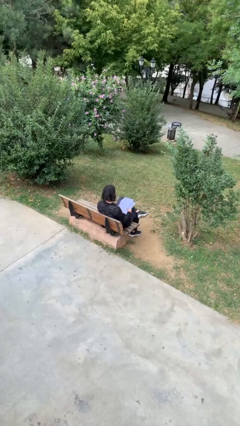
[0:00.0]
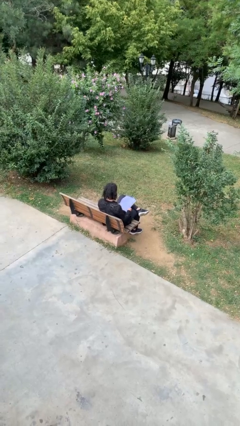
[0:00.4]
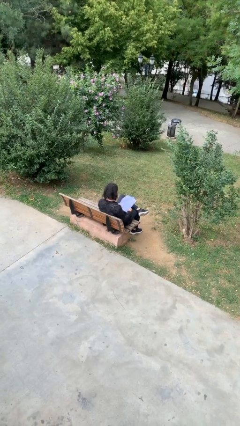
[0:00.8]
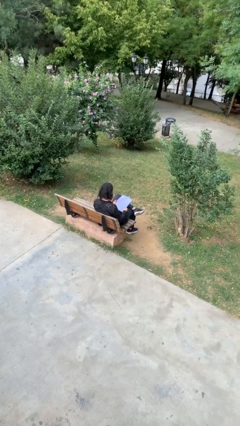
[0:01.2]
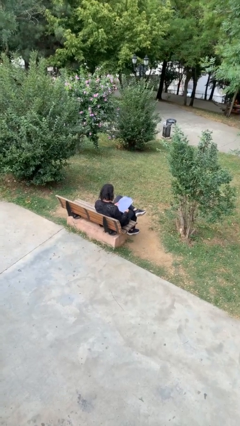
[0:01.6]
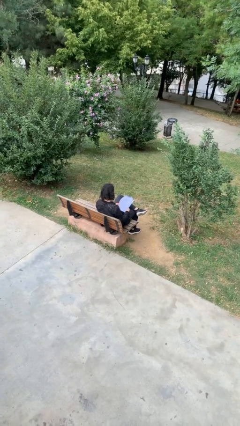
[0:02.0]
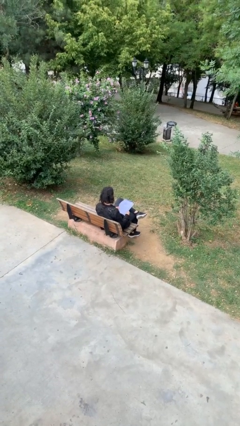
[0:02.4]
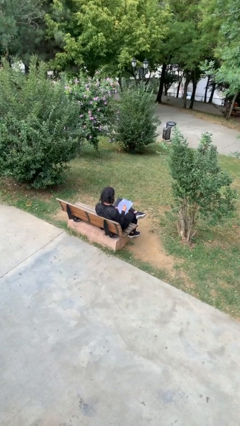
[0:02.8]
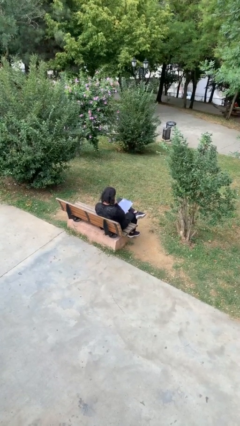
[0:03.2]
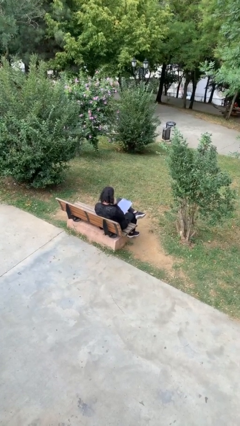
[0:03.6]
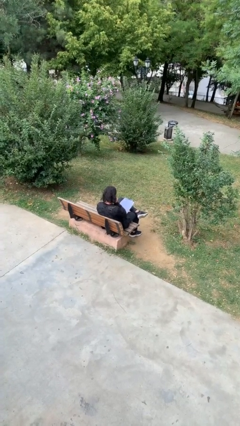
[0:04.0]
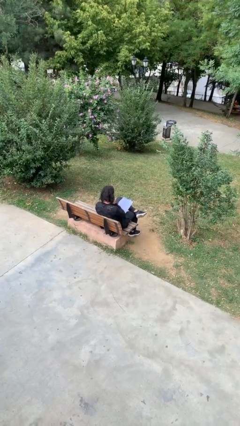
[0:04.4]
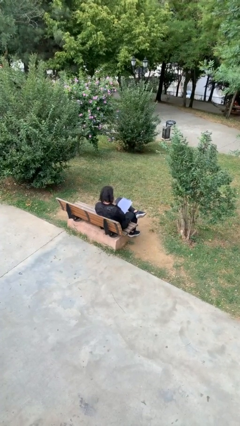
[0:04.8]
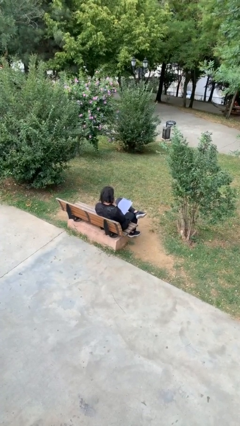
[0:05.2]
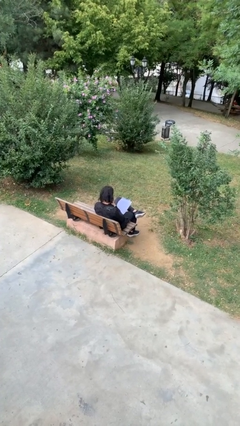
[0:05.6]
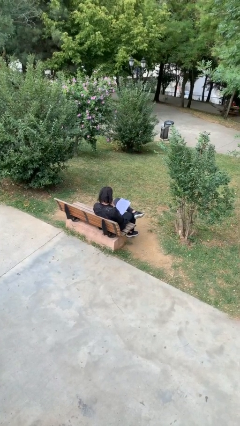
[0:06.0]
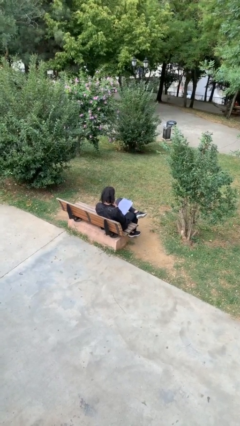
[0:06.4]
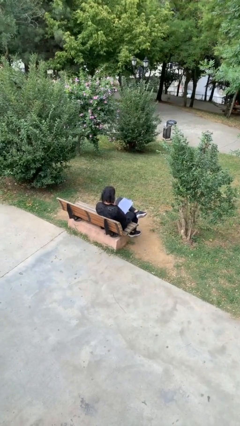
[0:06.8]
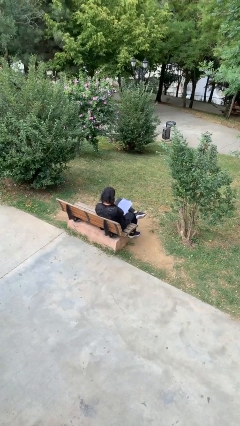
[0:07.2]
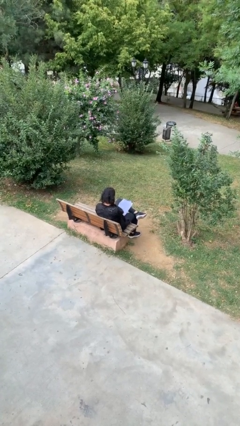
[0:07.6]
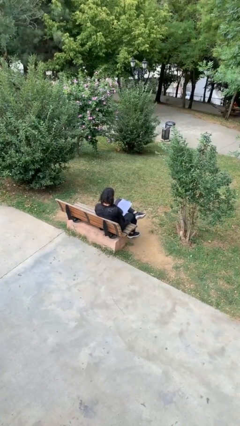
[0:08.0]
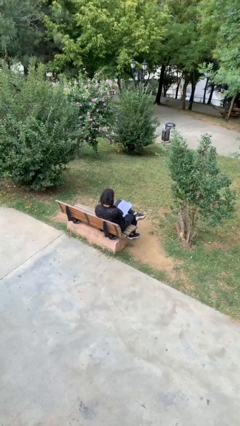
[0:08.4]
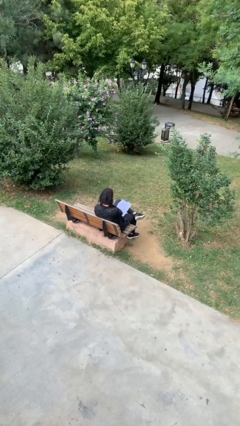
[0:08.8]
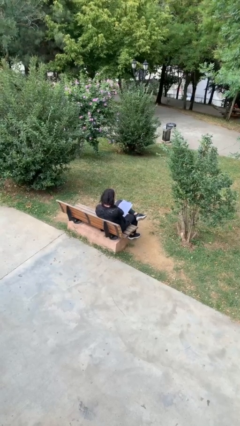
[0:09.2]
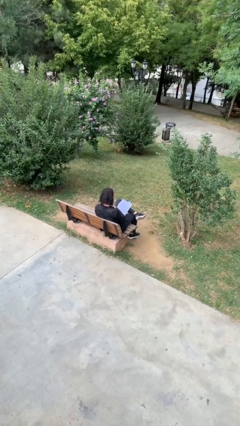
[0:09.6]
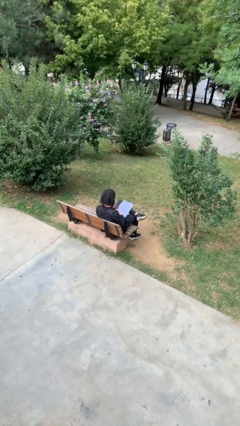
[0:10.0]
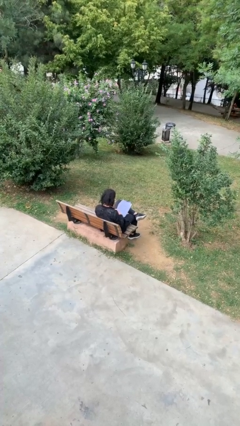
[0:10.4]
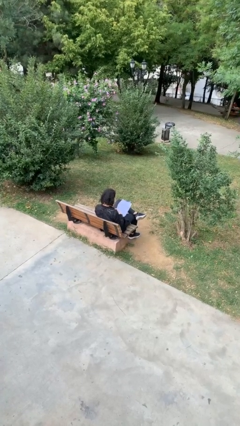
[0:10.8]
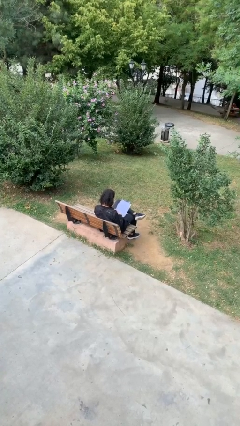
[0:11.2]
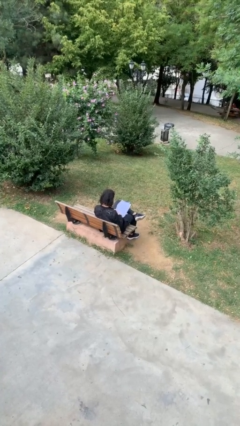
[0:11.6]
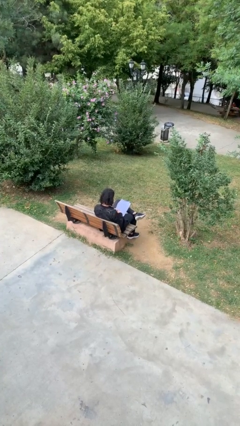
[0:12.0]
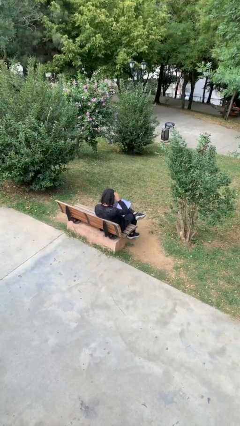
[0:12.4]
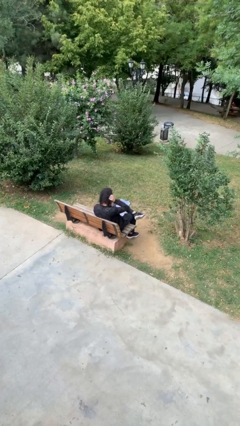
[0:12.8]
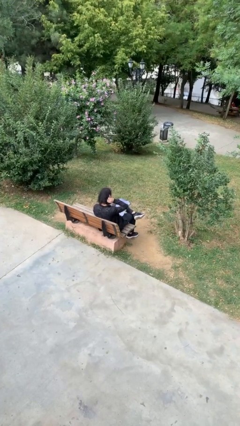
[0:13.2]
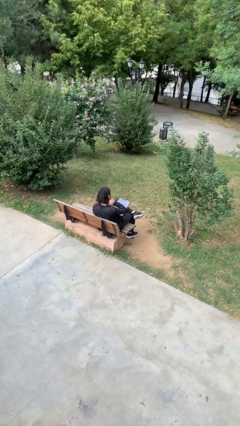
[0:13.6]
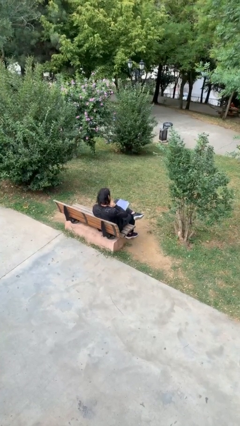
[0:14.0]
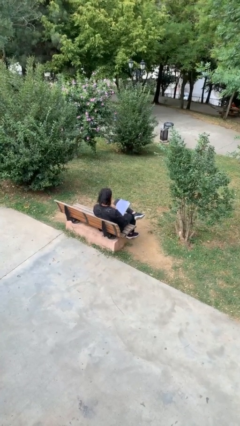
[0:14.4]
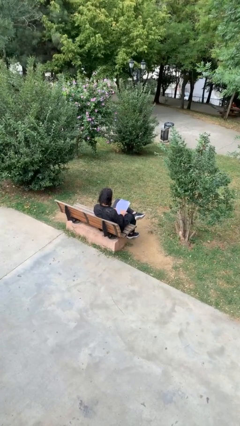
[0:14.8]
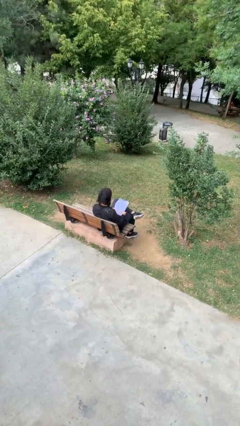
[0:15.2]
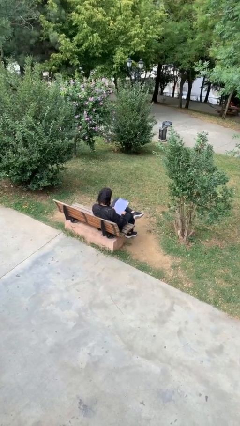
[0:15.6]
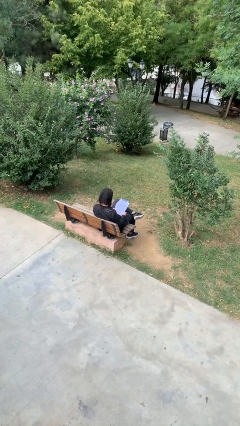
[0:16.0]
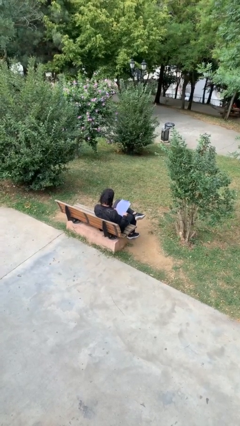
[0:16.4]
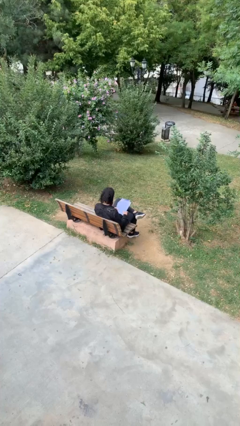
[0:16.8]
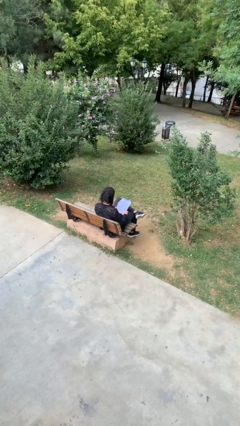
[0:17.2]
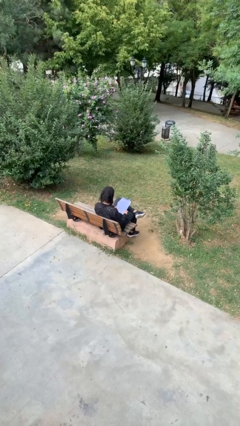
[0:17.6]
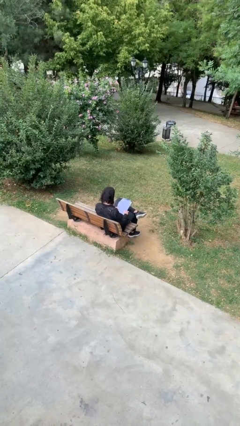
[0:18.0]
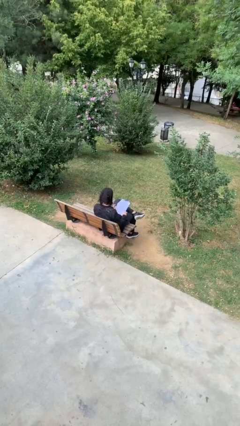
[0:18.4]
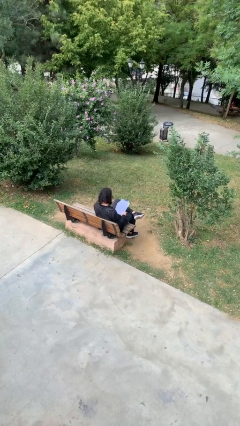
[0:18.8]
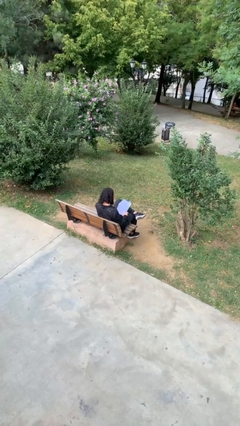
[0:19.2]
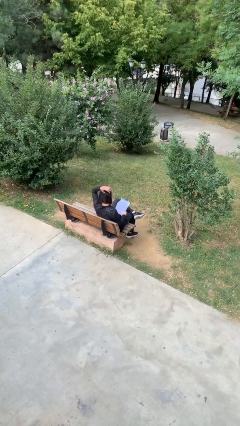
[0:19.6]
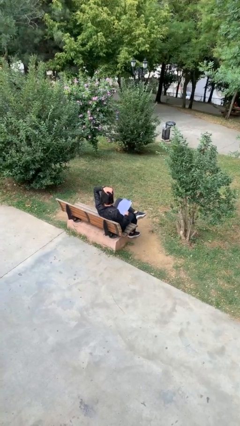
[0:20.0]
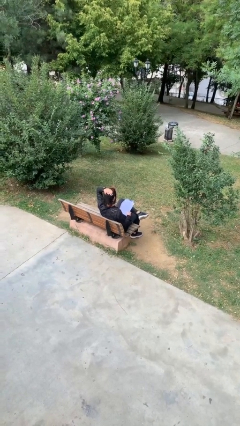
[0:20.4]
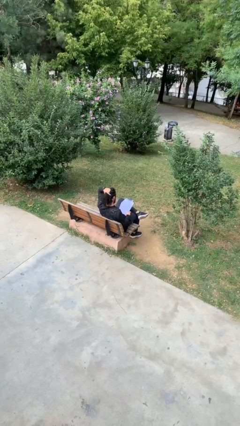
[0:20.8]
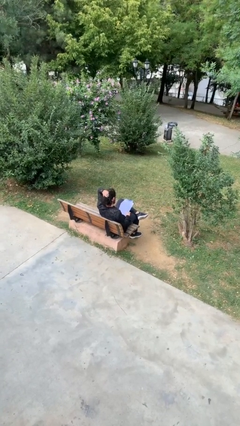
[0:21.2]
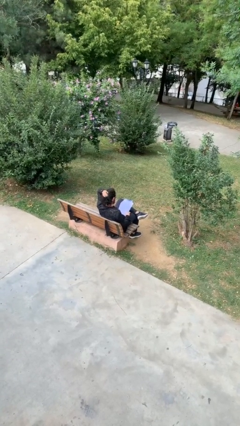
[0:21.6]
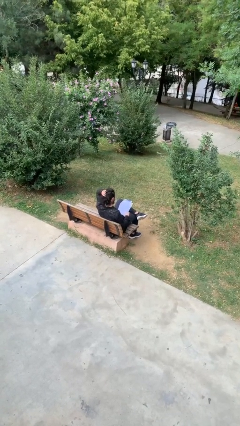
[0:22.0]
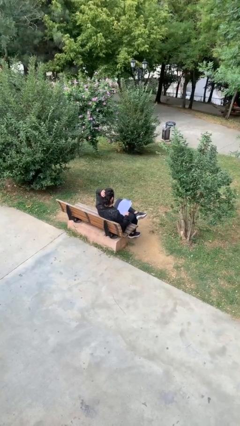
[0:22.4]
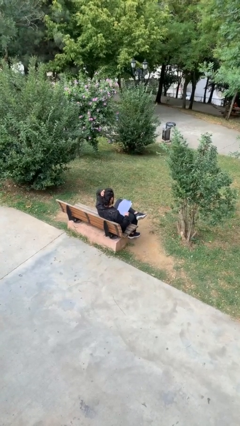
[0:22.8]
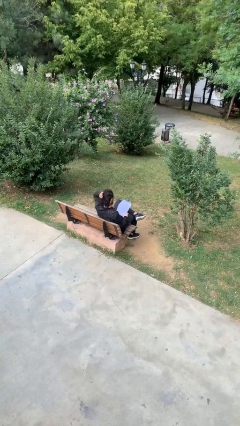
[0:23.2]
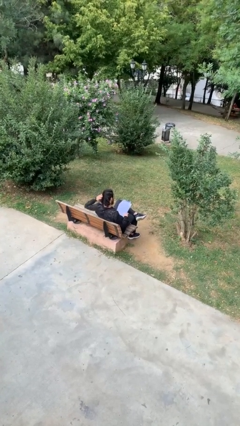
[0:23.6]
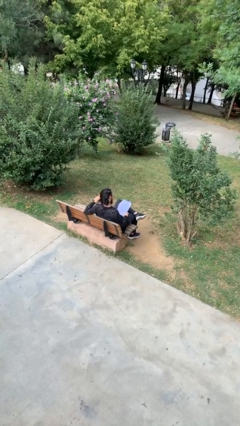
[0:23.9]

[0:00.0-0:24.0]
person reads document

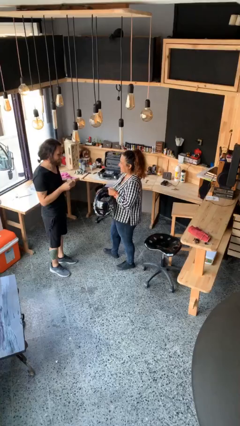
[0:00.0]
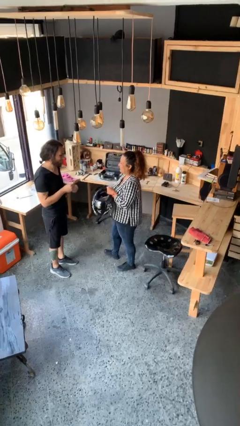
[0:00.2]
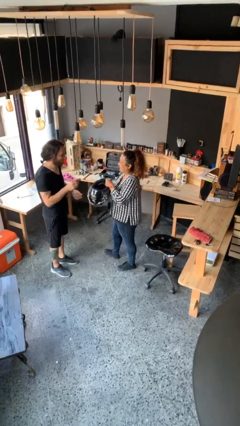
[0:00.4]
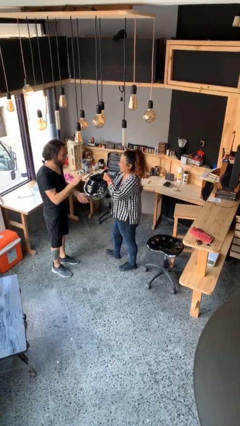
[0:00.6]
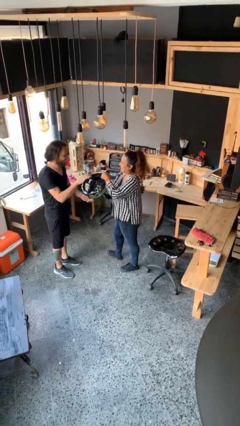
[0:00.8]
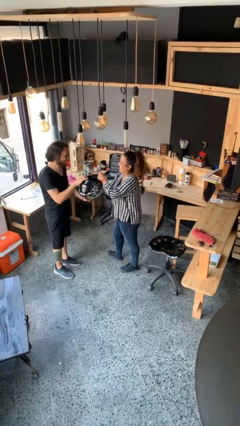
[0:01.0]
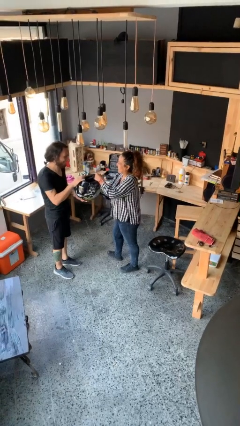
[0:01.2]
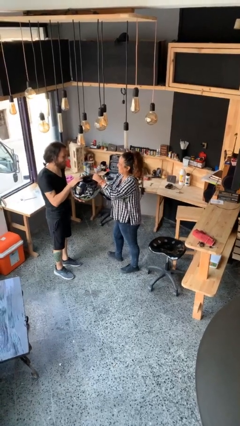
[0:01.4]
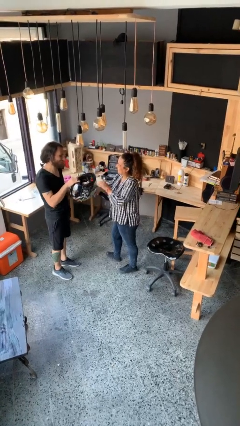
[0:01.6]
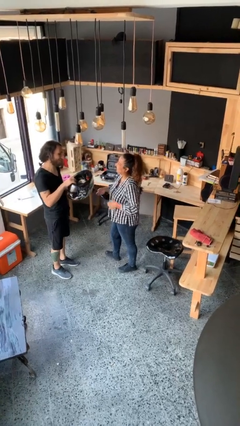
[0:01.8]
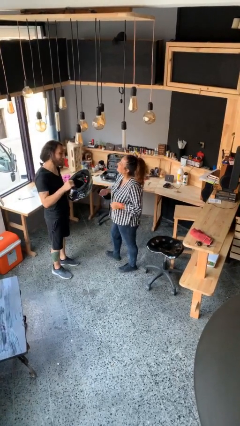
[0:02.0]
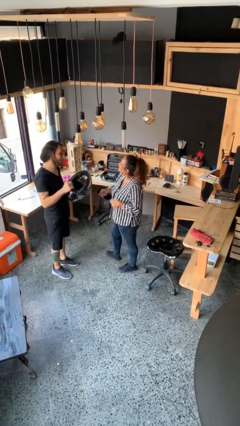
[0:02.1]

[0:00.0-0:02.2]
person transfers object to person

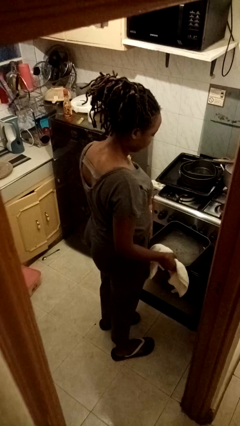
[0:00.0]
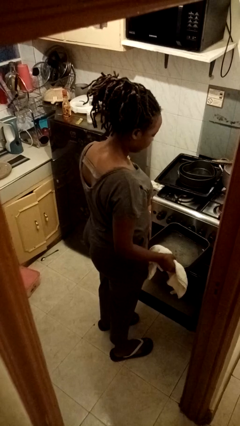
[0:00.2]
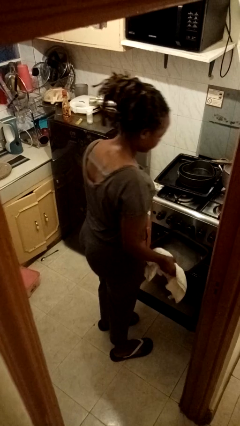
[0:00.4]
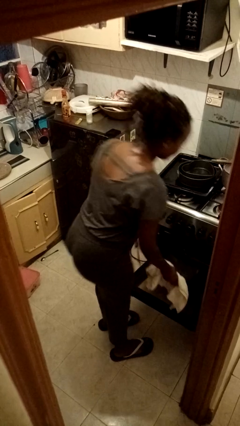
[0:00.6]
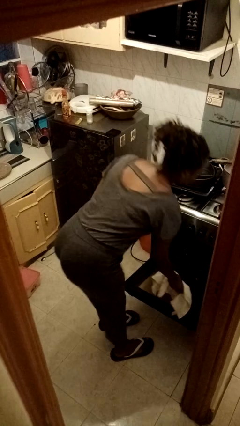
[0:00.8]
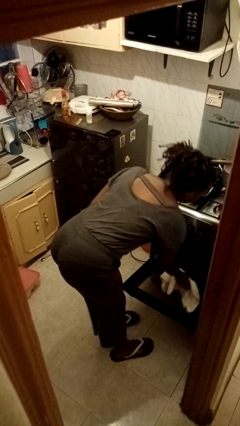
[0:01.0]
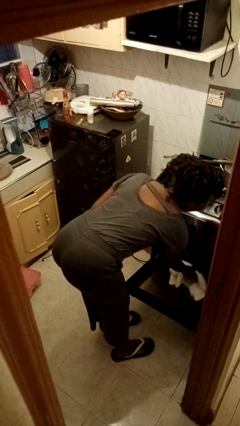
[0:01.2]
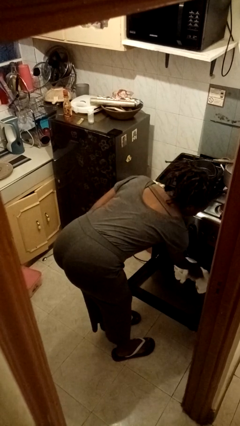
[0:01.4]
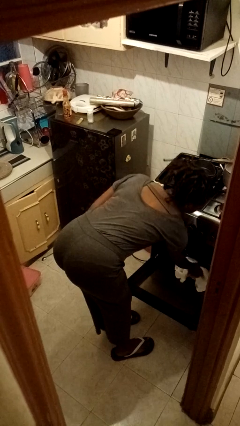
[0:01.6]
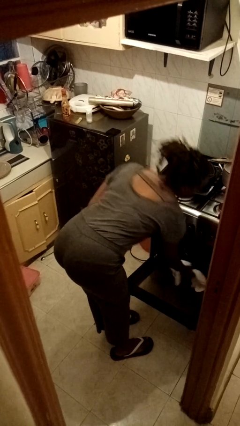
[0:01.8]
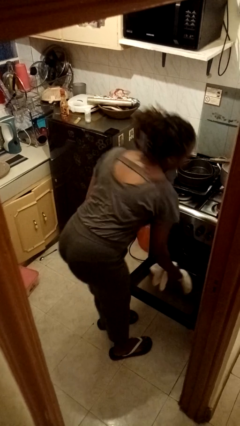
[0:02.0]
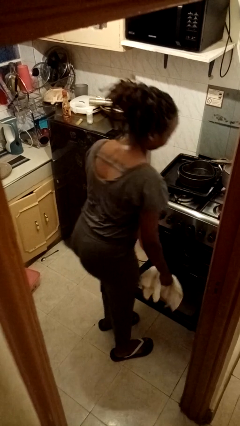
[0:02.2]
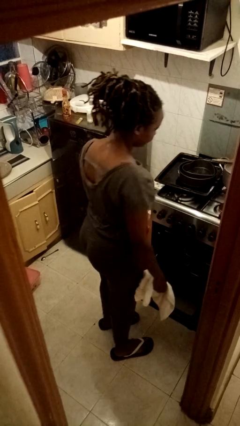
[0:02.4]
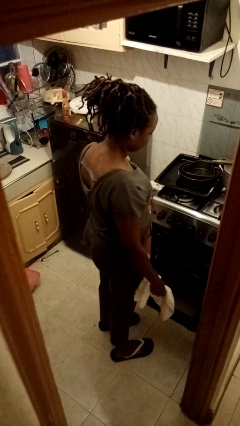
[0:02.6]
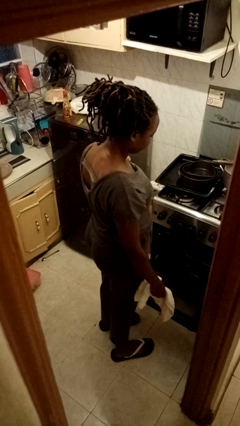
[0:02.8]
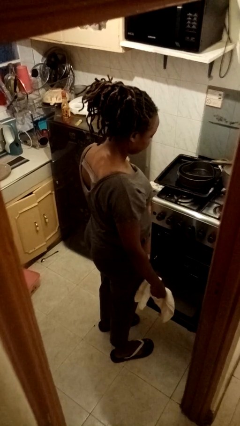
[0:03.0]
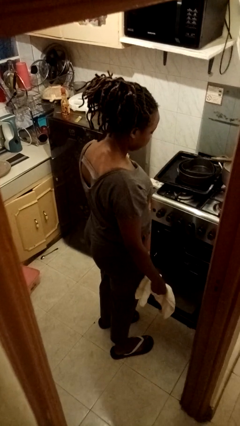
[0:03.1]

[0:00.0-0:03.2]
person puts object into oven

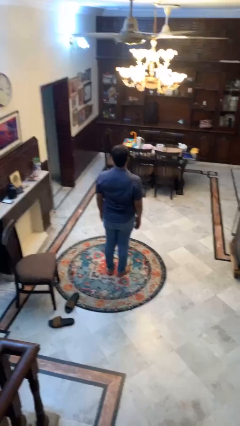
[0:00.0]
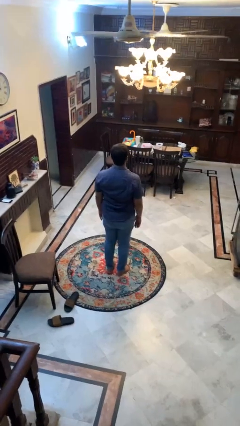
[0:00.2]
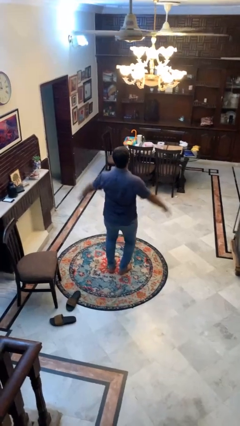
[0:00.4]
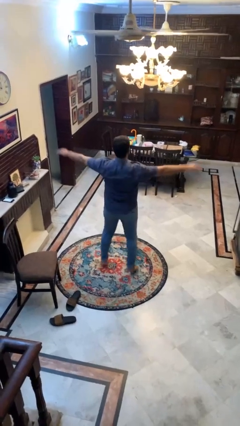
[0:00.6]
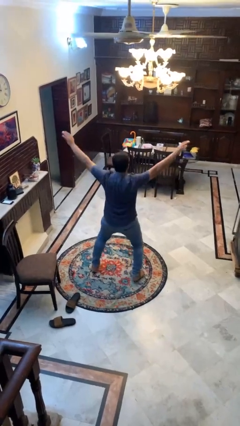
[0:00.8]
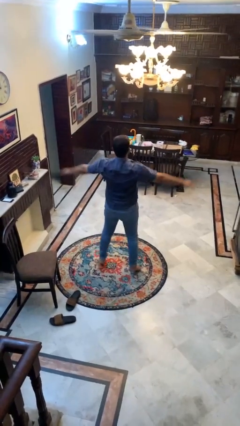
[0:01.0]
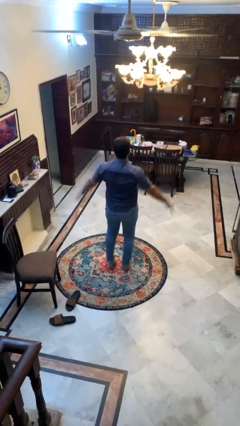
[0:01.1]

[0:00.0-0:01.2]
person exercises with jumping jacks
